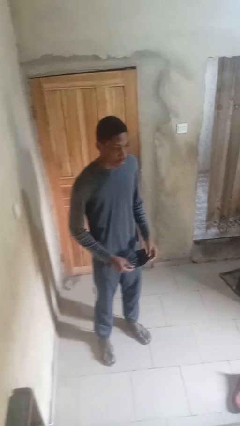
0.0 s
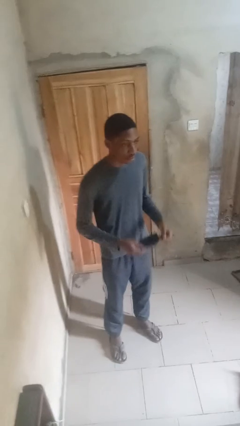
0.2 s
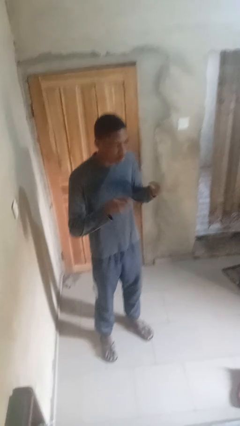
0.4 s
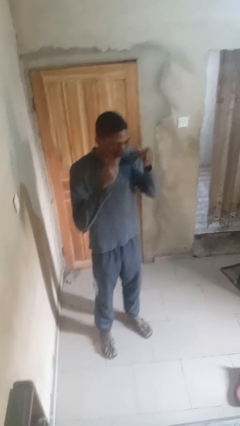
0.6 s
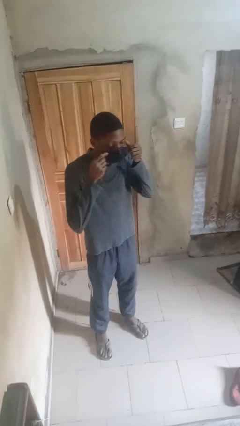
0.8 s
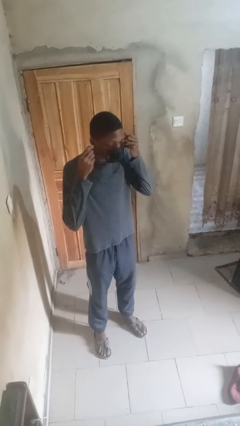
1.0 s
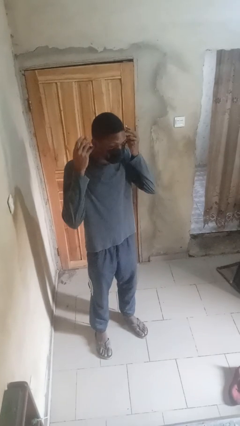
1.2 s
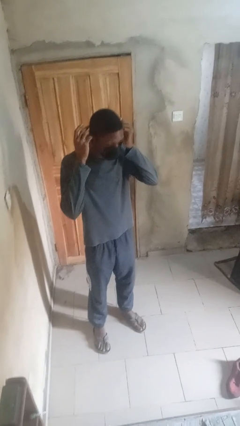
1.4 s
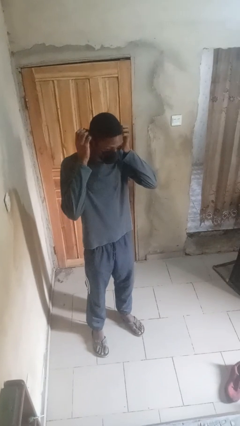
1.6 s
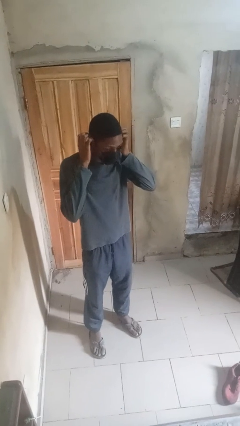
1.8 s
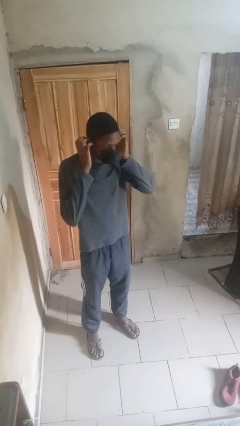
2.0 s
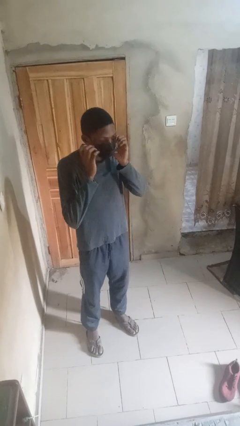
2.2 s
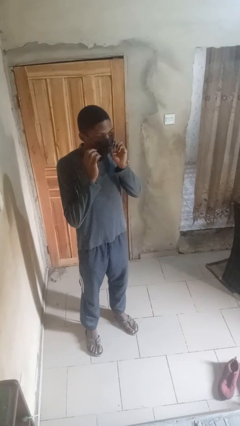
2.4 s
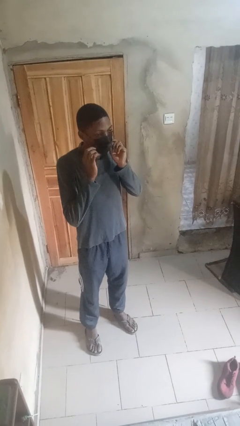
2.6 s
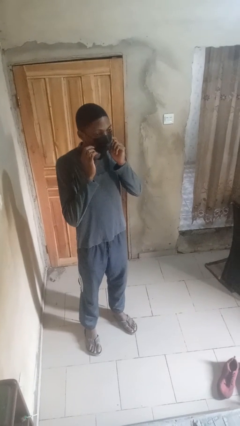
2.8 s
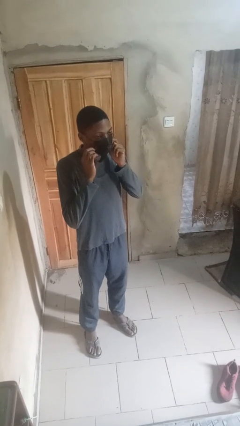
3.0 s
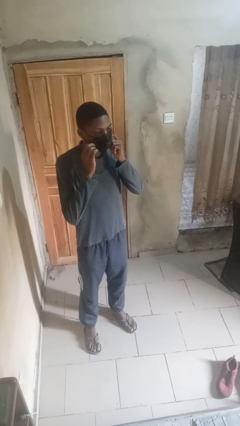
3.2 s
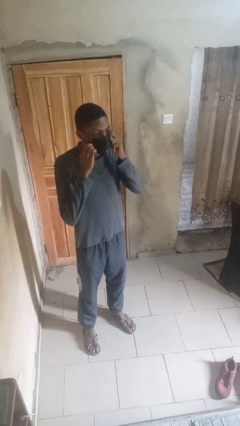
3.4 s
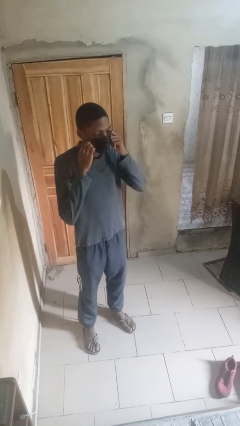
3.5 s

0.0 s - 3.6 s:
person puts on facemask

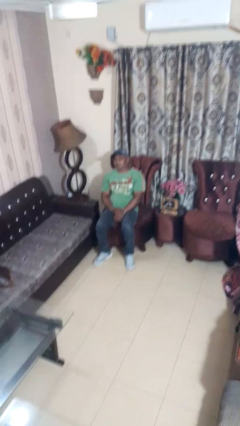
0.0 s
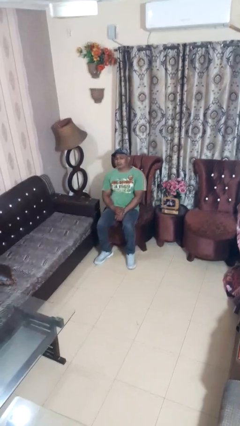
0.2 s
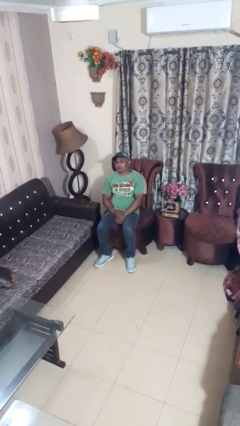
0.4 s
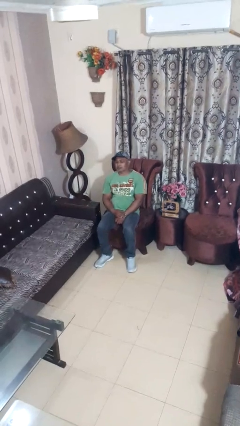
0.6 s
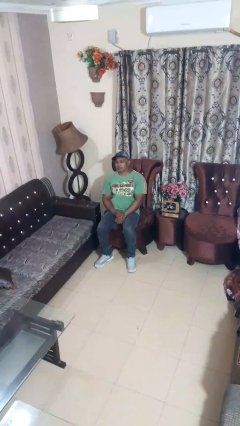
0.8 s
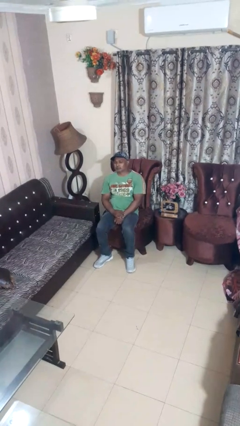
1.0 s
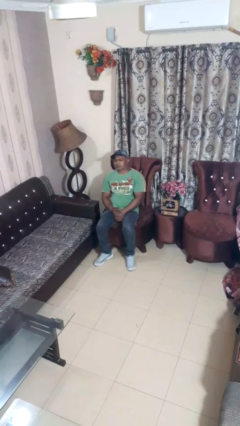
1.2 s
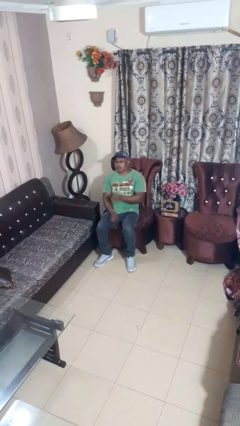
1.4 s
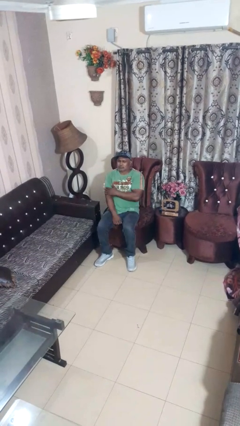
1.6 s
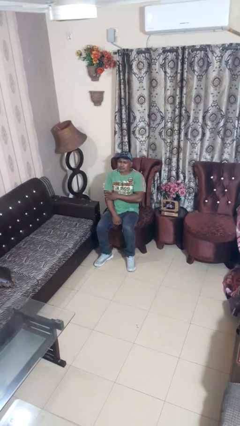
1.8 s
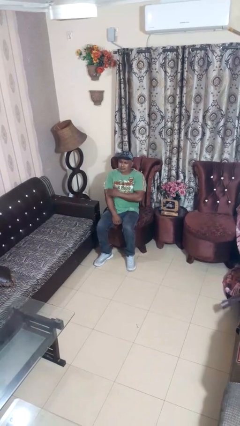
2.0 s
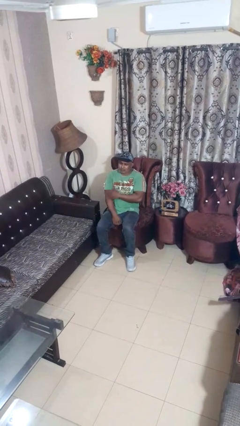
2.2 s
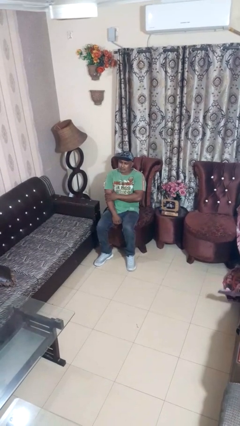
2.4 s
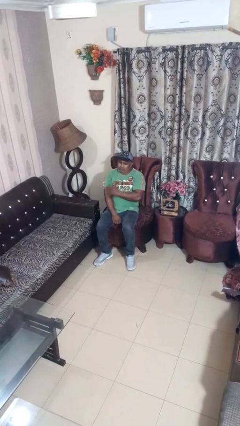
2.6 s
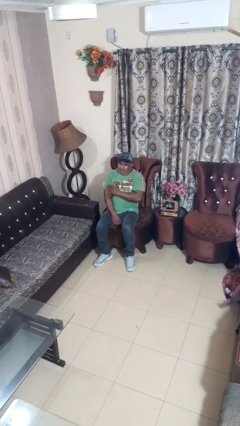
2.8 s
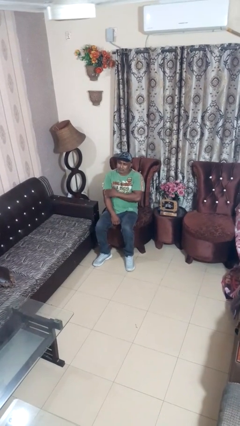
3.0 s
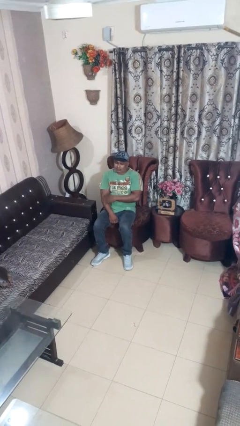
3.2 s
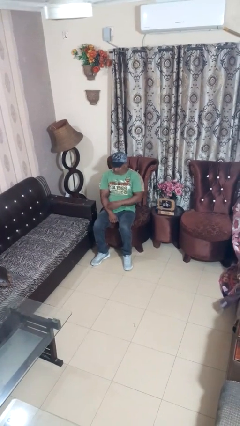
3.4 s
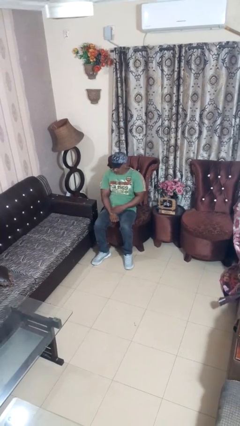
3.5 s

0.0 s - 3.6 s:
person swats bug

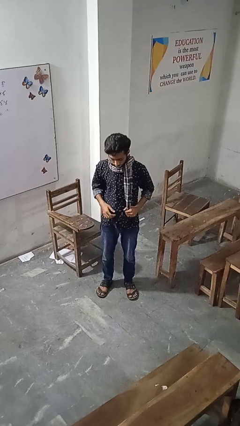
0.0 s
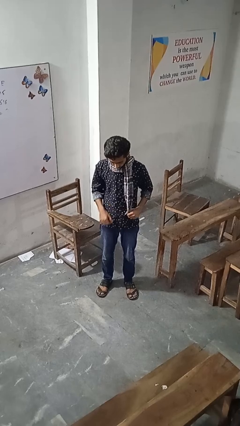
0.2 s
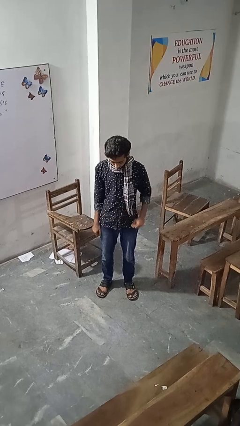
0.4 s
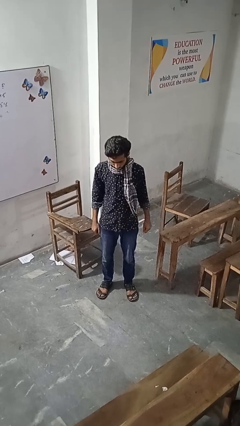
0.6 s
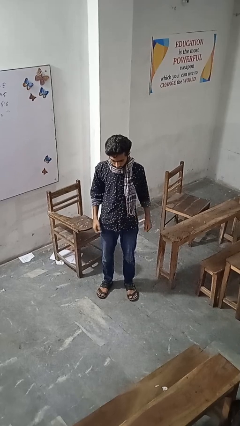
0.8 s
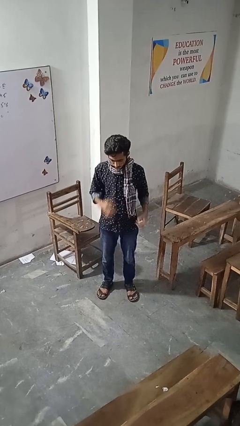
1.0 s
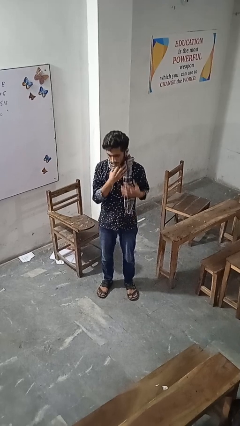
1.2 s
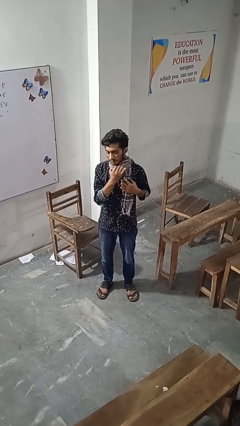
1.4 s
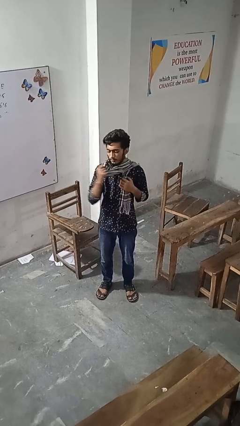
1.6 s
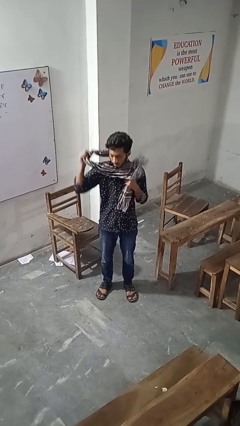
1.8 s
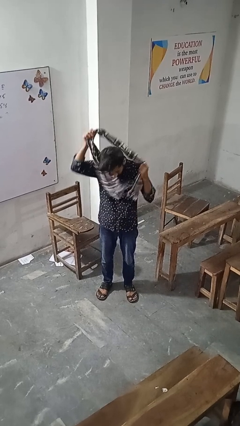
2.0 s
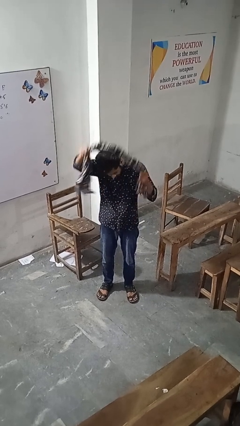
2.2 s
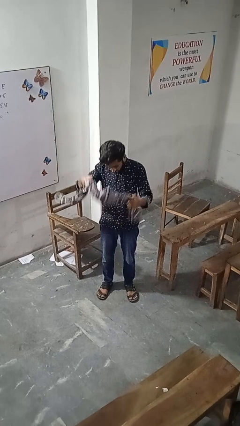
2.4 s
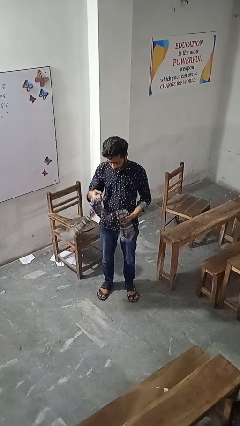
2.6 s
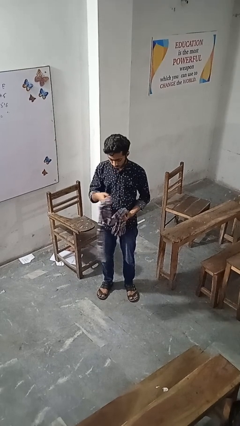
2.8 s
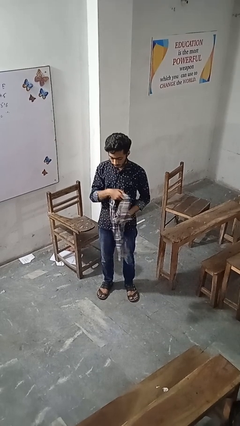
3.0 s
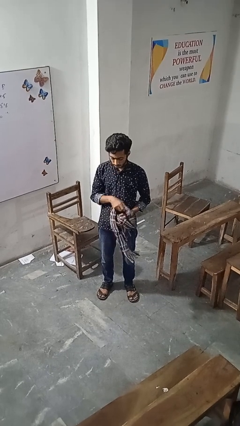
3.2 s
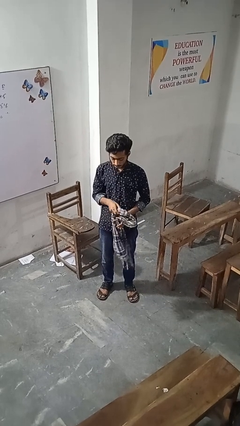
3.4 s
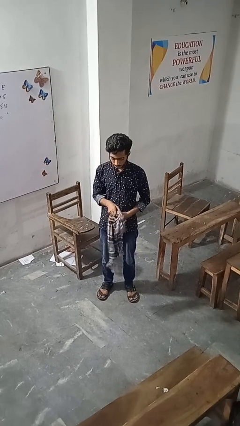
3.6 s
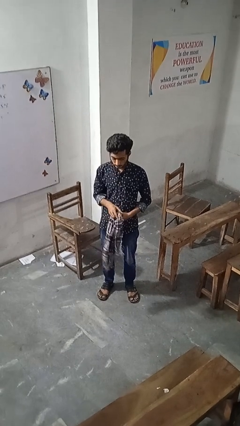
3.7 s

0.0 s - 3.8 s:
person takes off scarf

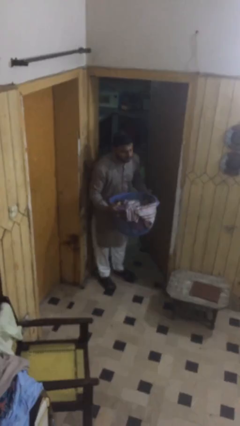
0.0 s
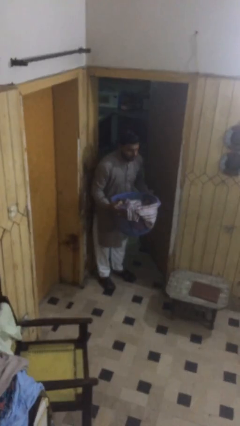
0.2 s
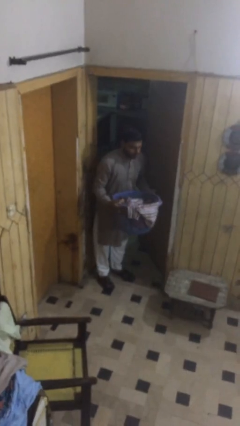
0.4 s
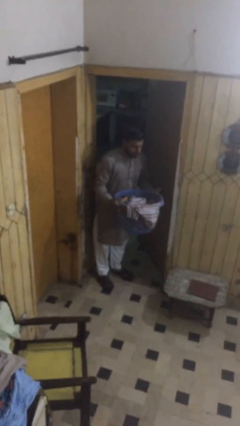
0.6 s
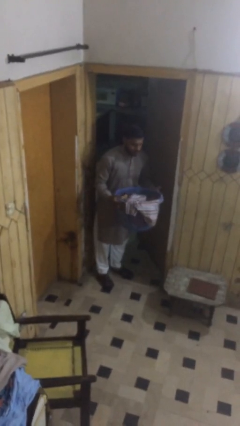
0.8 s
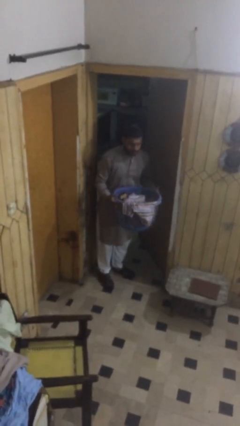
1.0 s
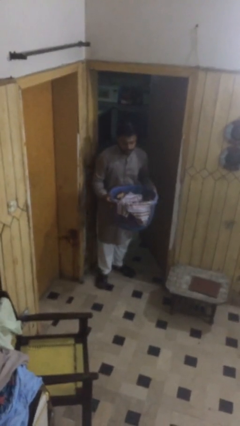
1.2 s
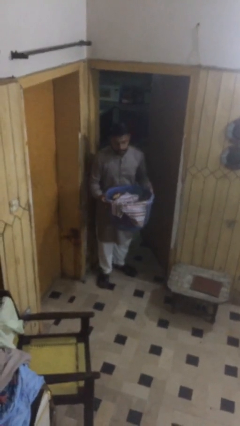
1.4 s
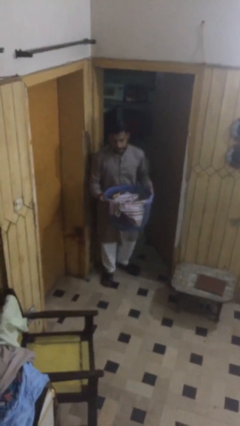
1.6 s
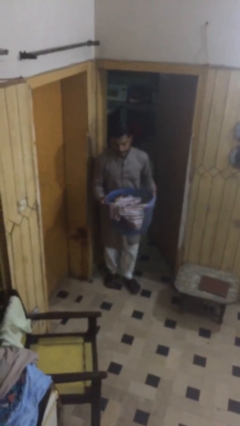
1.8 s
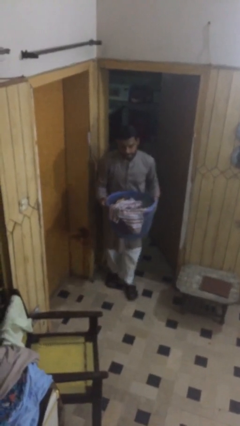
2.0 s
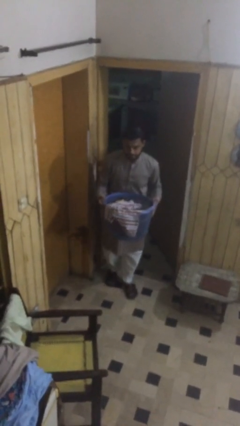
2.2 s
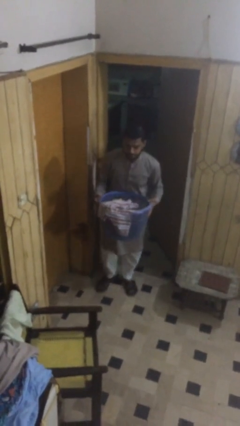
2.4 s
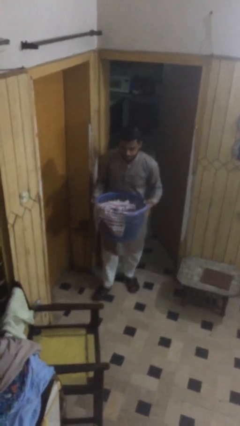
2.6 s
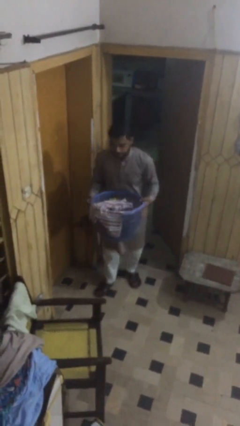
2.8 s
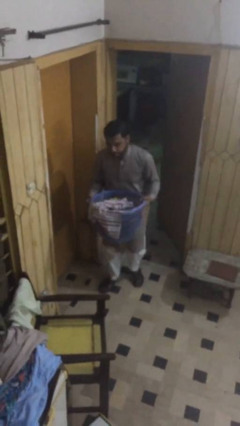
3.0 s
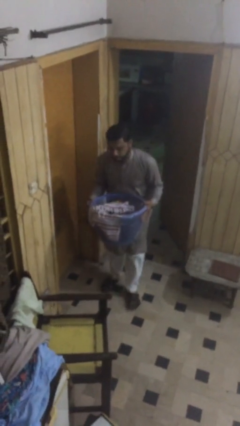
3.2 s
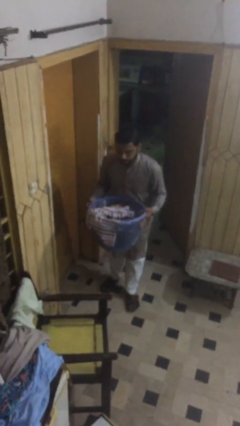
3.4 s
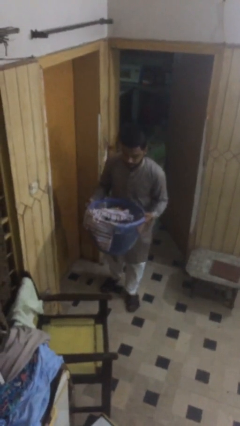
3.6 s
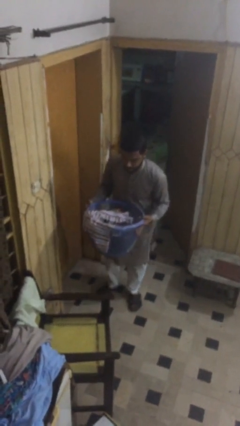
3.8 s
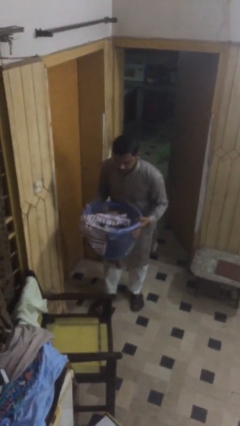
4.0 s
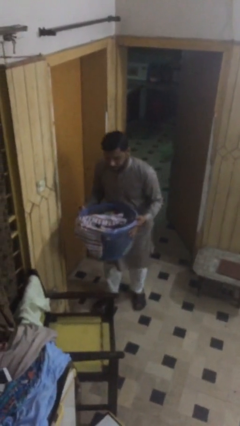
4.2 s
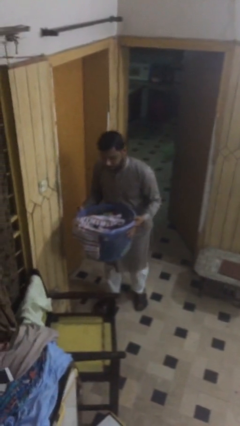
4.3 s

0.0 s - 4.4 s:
person carries heavy object

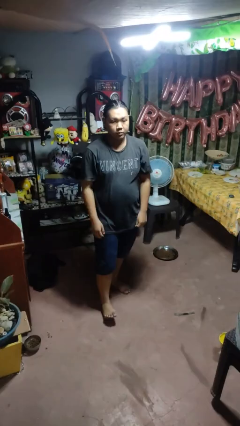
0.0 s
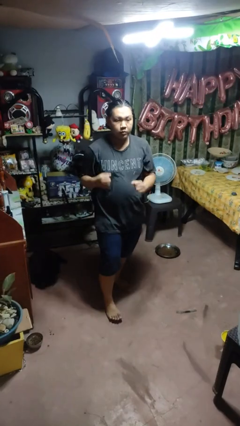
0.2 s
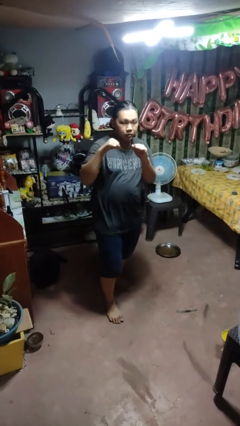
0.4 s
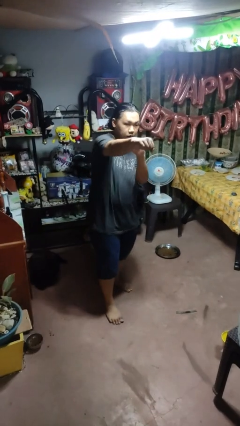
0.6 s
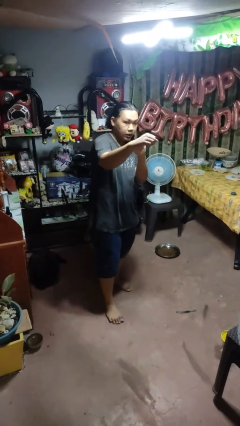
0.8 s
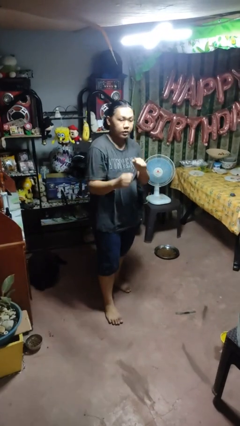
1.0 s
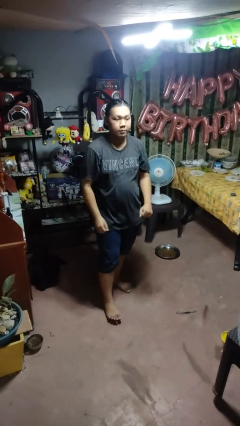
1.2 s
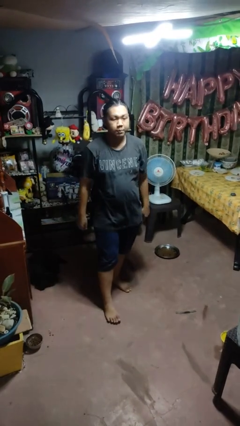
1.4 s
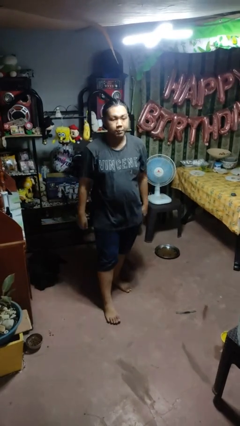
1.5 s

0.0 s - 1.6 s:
person punches

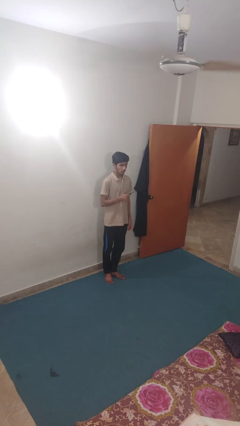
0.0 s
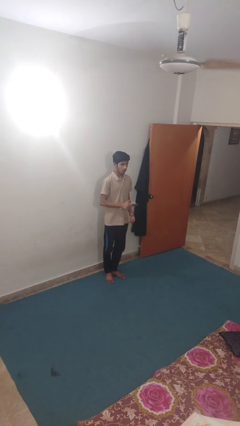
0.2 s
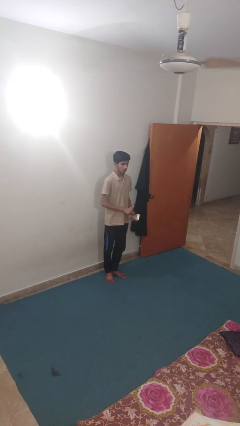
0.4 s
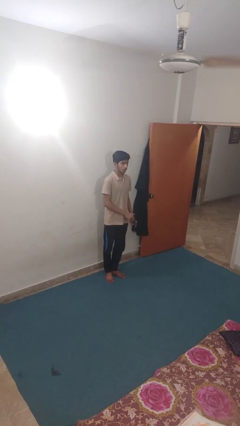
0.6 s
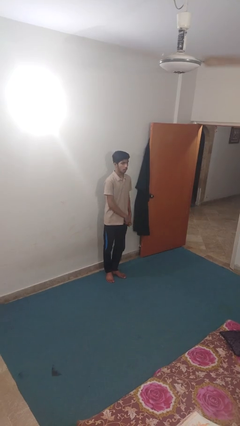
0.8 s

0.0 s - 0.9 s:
person puts phone into pocket
